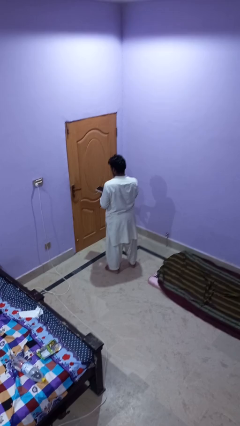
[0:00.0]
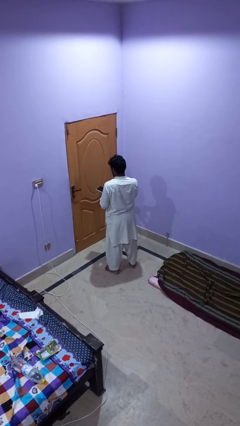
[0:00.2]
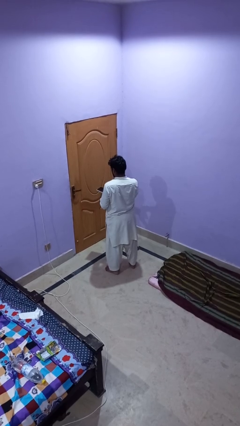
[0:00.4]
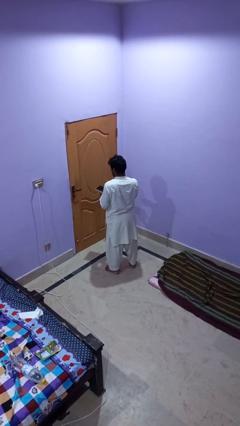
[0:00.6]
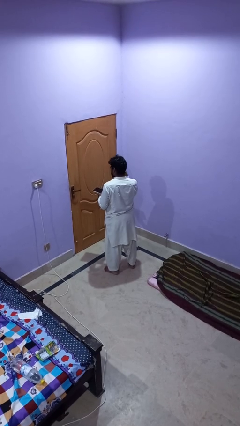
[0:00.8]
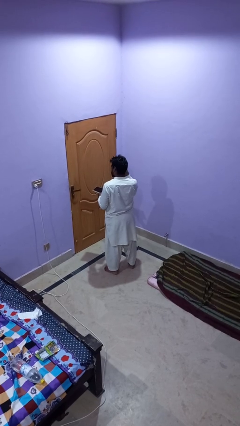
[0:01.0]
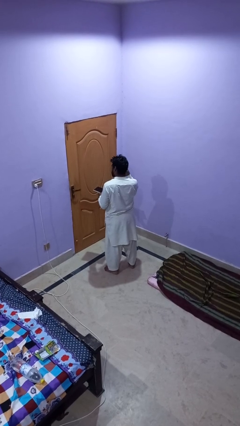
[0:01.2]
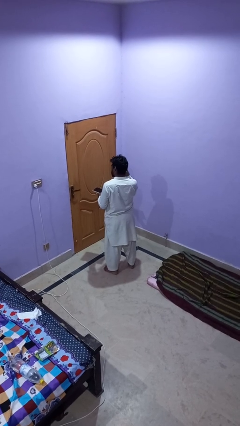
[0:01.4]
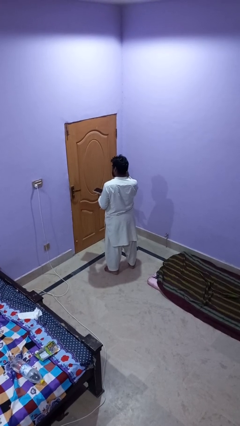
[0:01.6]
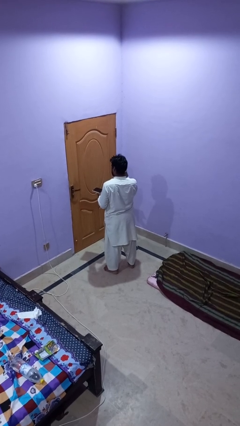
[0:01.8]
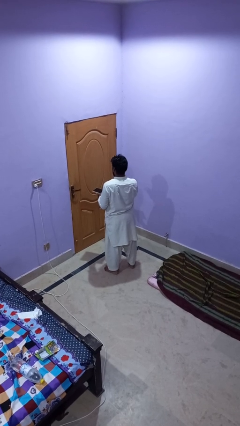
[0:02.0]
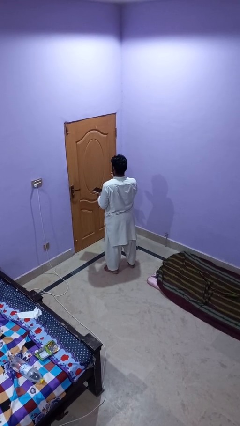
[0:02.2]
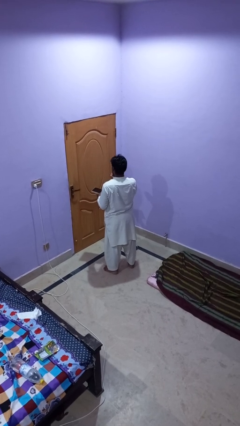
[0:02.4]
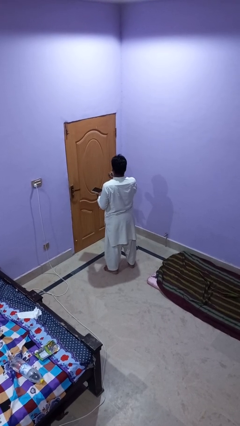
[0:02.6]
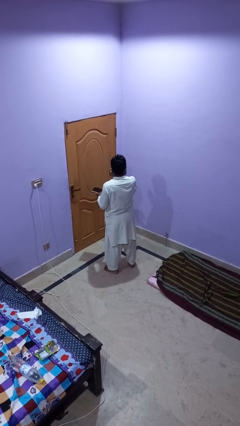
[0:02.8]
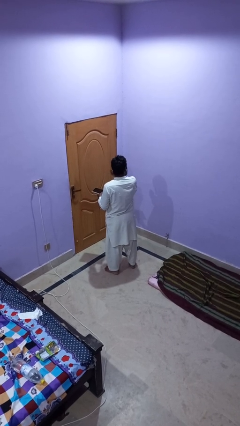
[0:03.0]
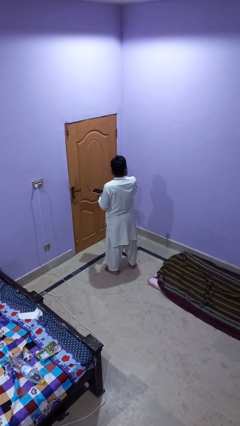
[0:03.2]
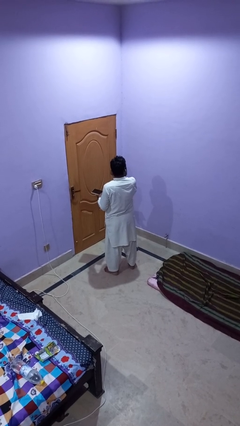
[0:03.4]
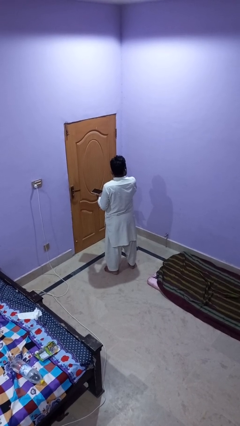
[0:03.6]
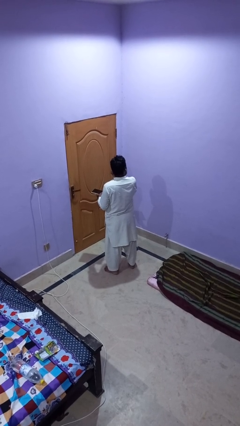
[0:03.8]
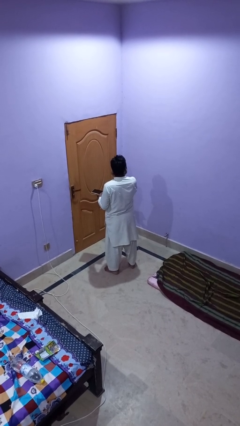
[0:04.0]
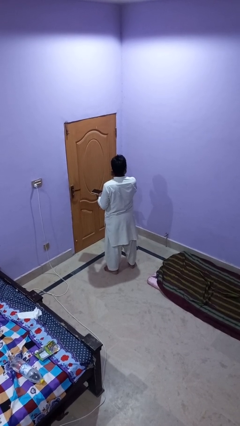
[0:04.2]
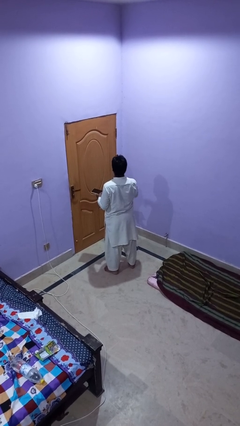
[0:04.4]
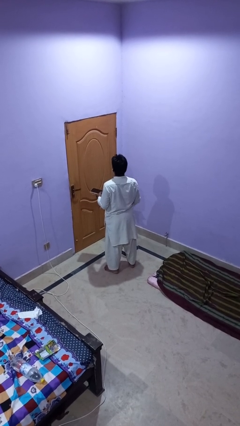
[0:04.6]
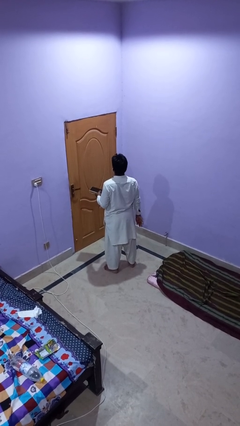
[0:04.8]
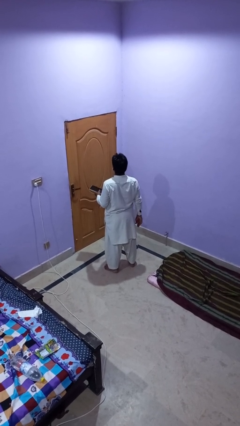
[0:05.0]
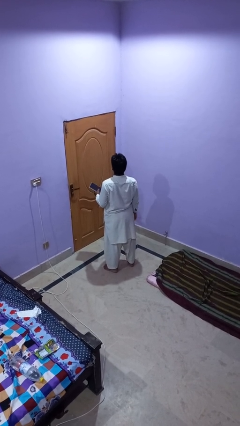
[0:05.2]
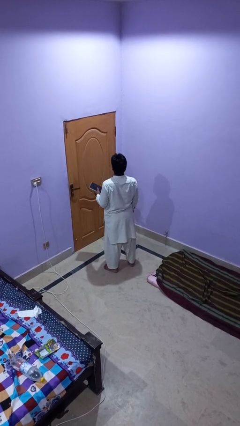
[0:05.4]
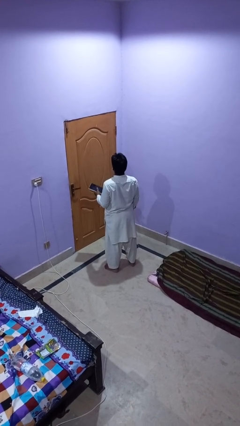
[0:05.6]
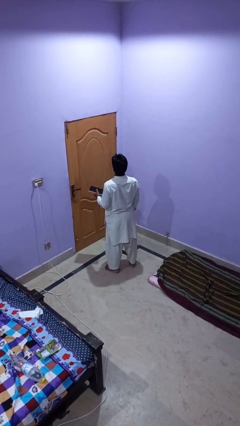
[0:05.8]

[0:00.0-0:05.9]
person puts on headphones

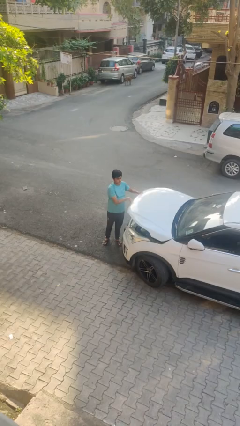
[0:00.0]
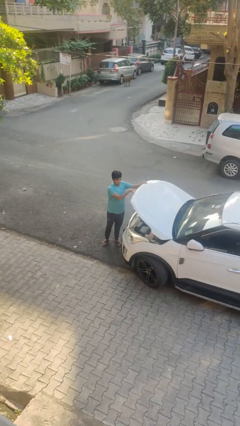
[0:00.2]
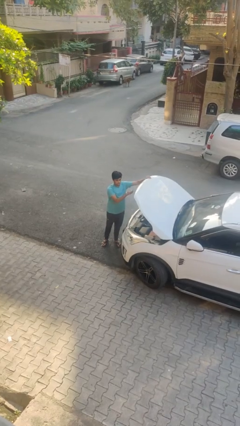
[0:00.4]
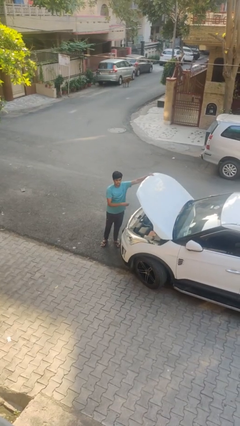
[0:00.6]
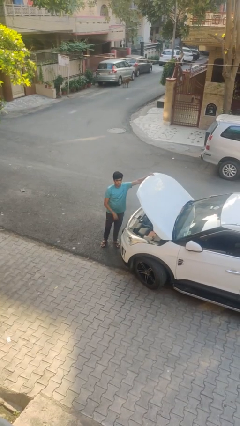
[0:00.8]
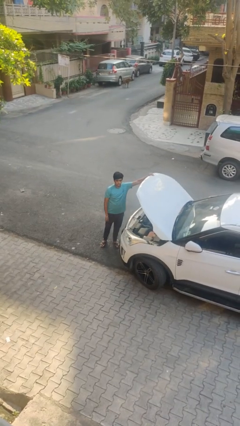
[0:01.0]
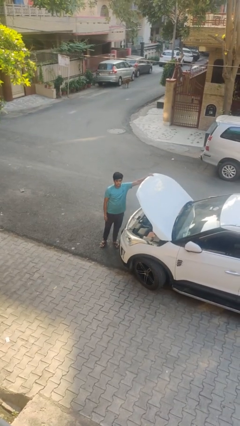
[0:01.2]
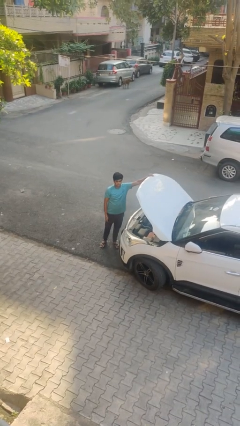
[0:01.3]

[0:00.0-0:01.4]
person opens car hood

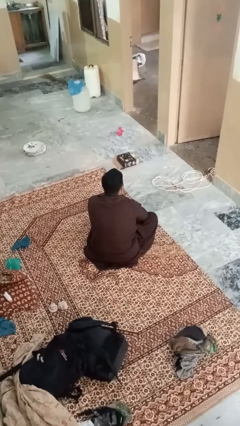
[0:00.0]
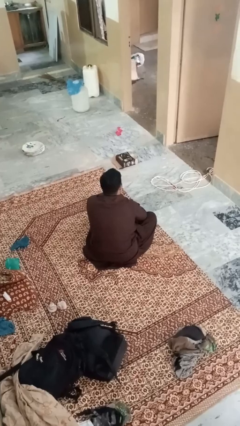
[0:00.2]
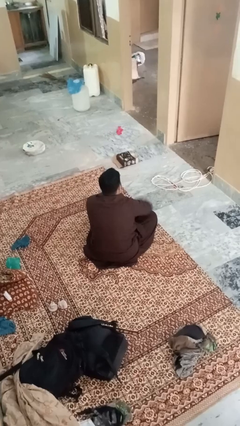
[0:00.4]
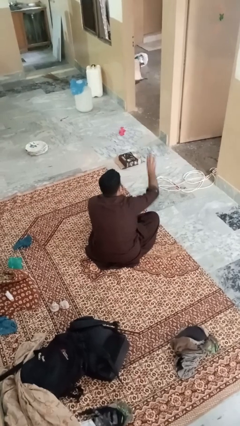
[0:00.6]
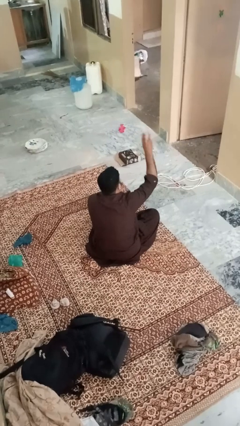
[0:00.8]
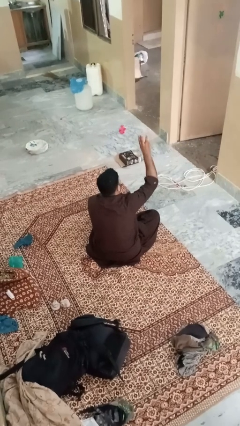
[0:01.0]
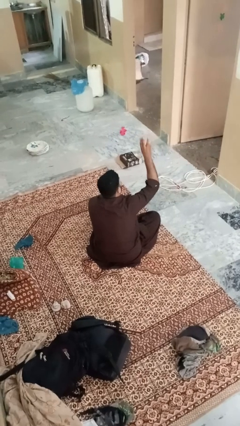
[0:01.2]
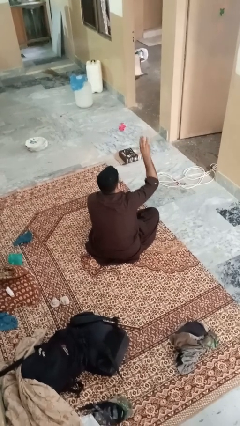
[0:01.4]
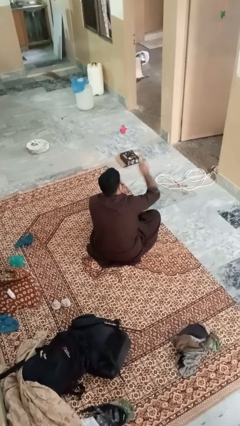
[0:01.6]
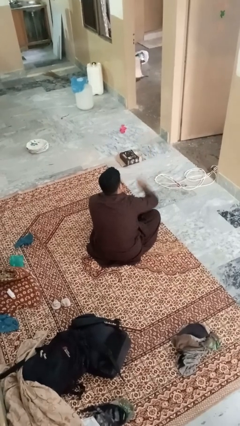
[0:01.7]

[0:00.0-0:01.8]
person gestures number three

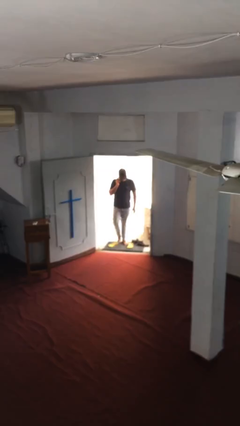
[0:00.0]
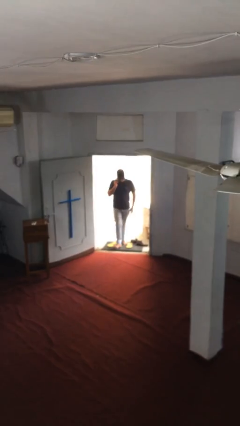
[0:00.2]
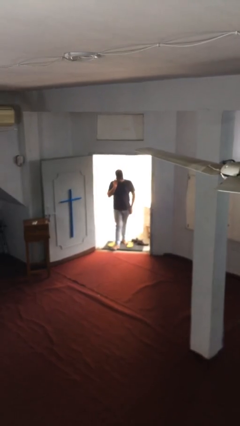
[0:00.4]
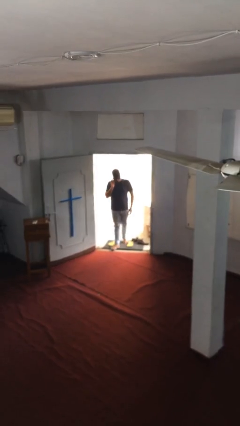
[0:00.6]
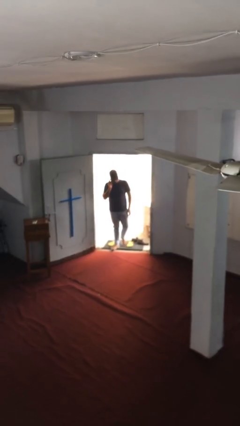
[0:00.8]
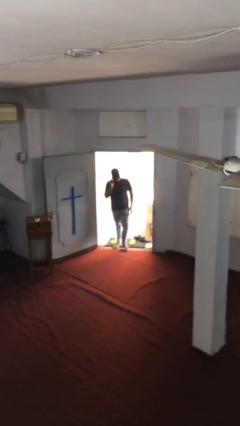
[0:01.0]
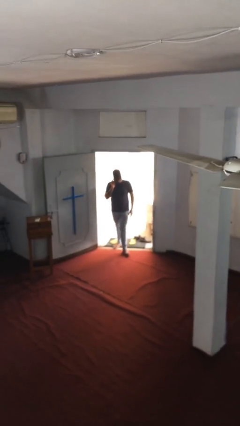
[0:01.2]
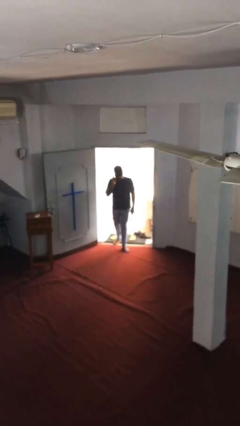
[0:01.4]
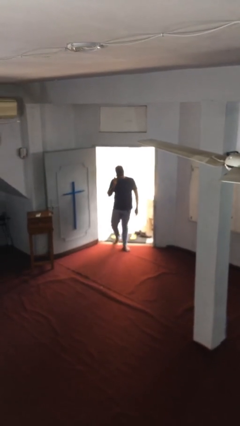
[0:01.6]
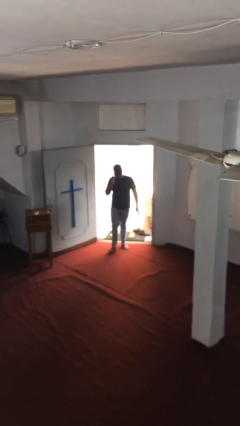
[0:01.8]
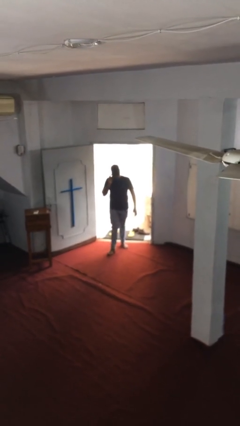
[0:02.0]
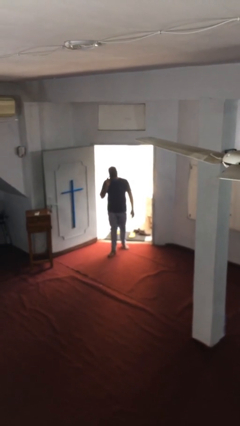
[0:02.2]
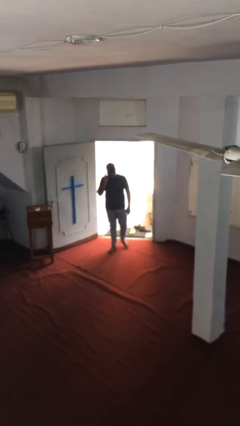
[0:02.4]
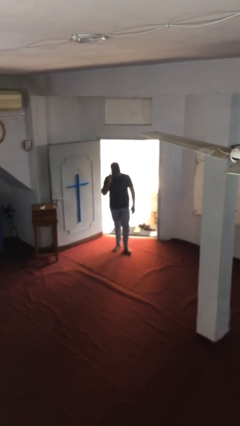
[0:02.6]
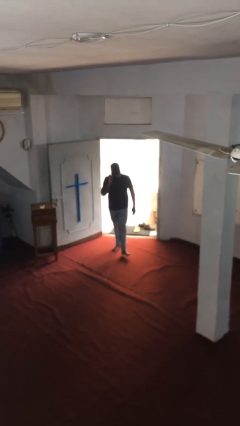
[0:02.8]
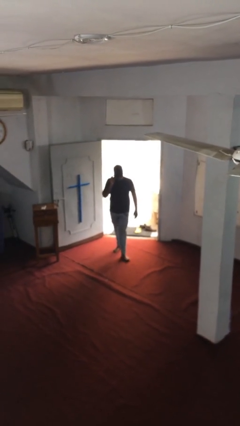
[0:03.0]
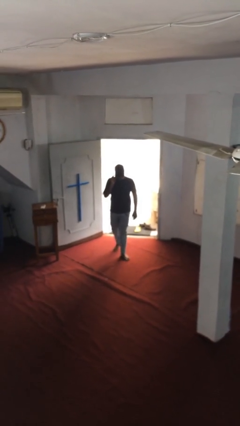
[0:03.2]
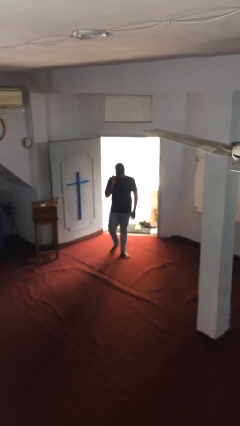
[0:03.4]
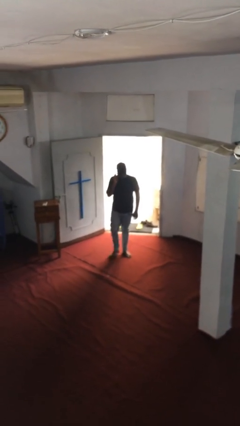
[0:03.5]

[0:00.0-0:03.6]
person enters scene through structure

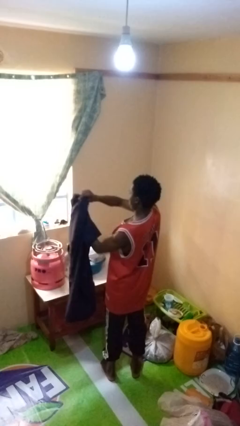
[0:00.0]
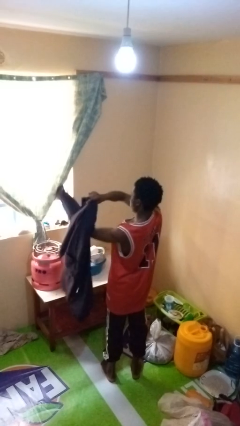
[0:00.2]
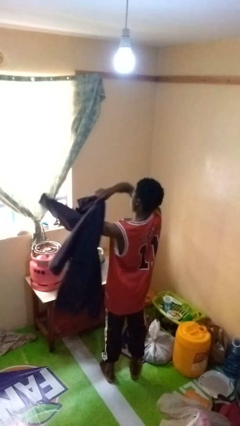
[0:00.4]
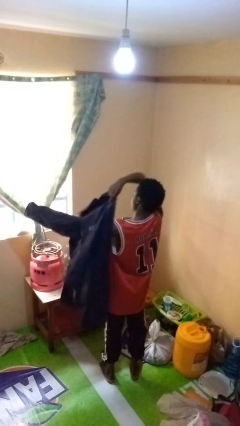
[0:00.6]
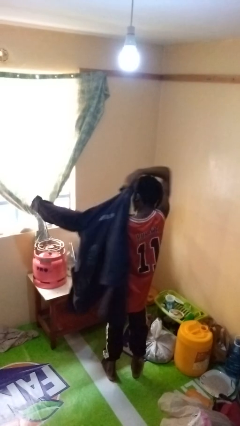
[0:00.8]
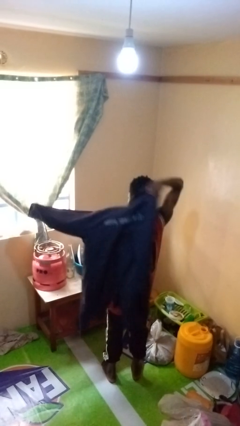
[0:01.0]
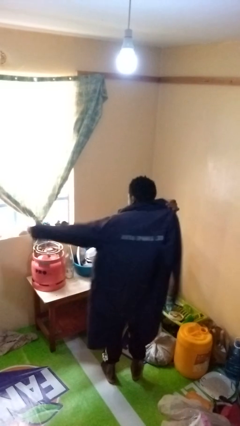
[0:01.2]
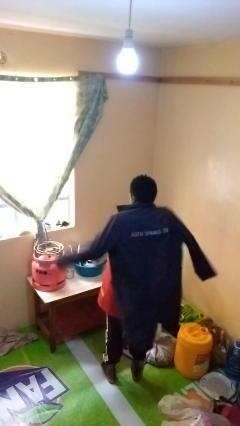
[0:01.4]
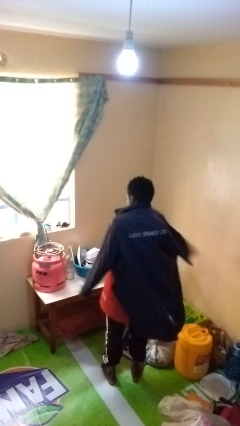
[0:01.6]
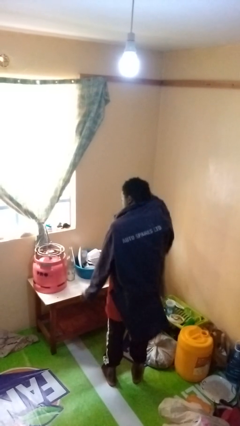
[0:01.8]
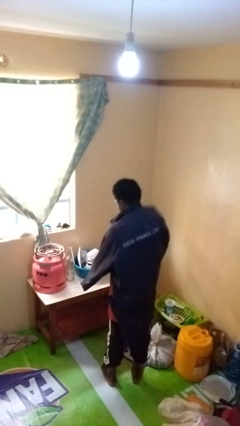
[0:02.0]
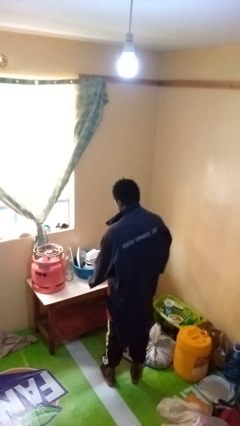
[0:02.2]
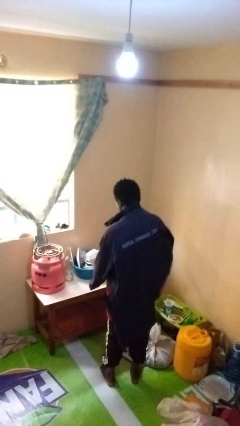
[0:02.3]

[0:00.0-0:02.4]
person puts on apron

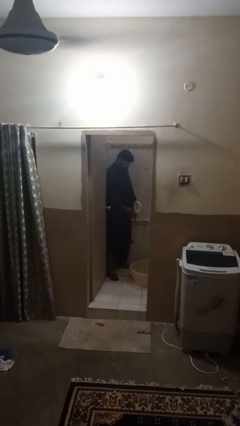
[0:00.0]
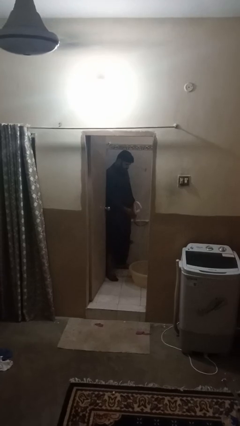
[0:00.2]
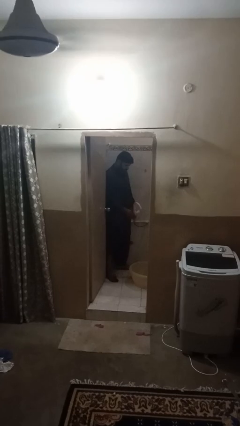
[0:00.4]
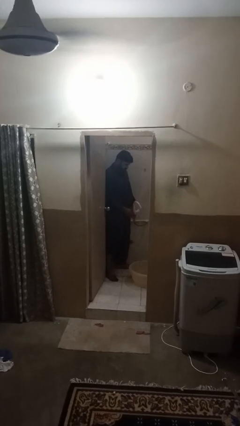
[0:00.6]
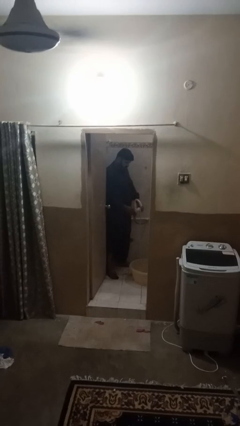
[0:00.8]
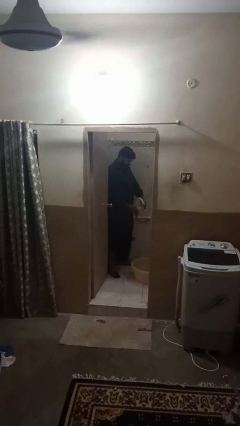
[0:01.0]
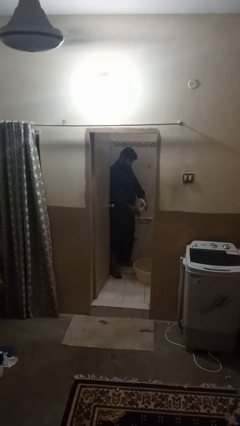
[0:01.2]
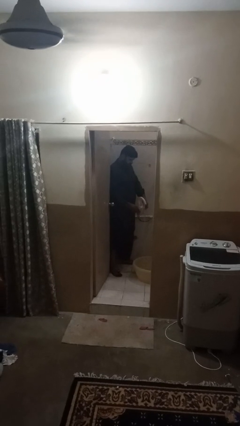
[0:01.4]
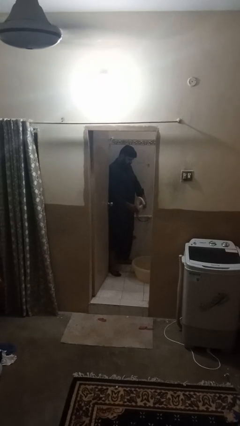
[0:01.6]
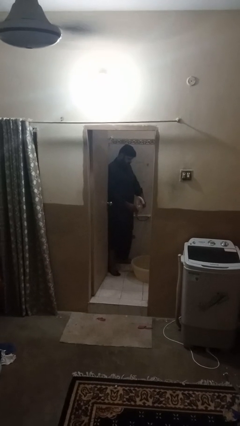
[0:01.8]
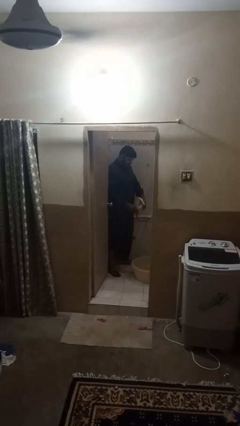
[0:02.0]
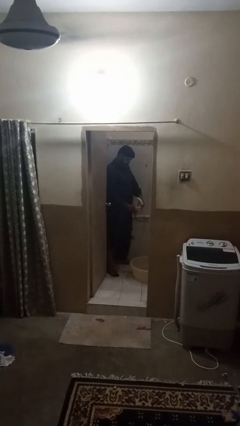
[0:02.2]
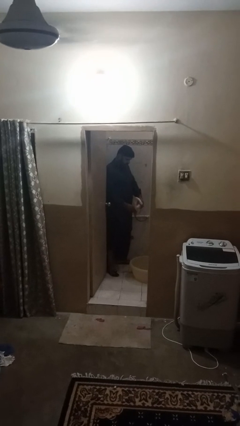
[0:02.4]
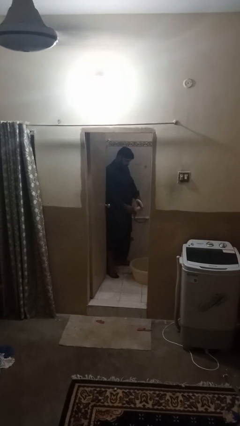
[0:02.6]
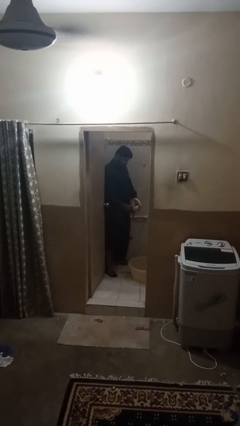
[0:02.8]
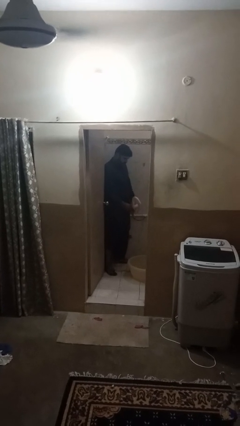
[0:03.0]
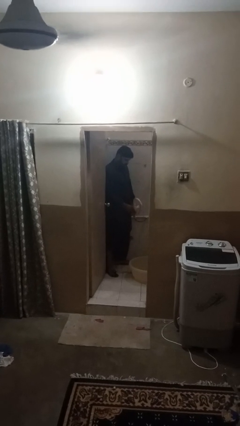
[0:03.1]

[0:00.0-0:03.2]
person turns off faucet
